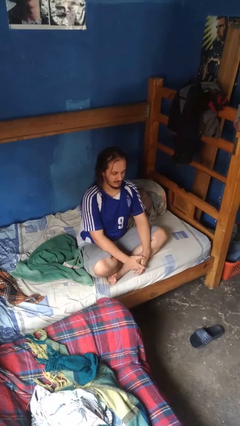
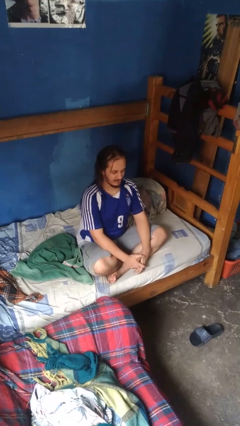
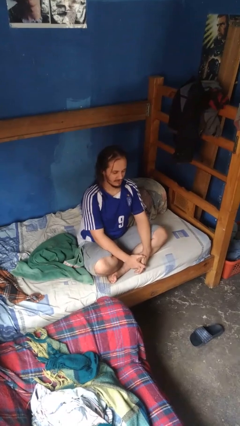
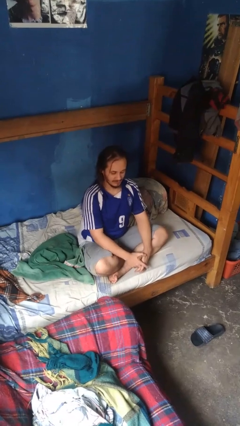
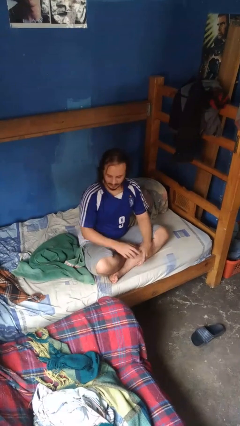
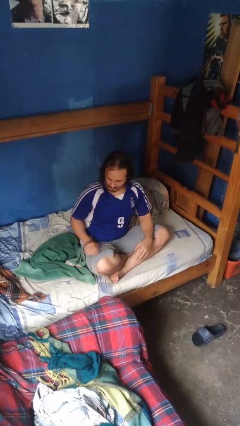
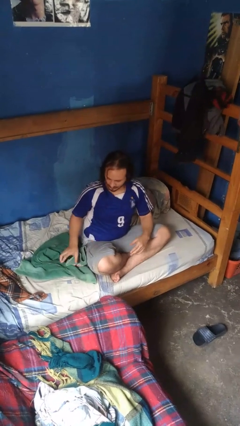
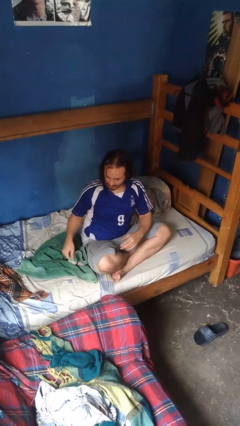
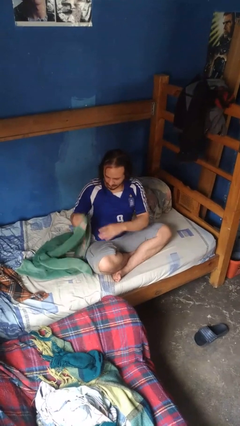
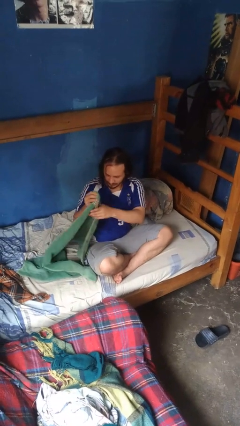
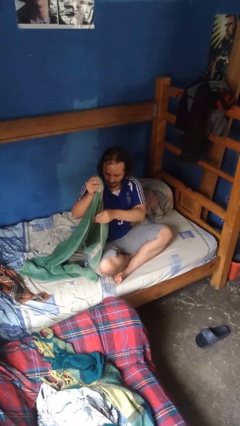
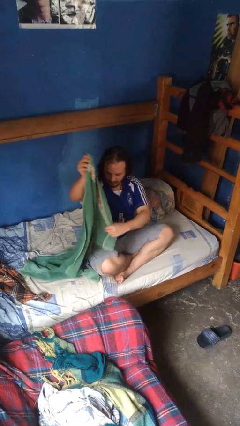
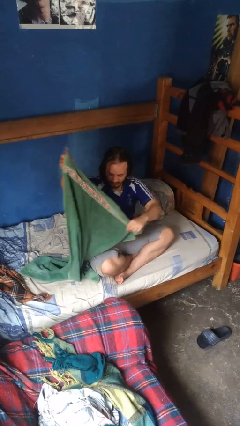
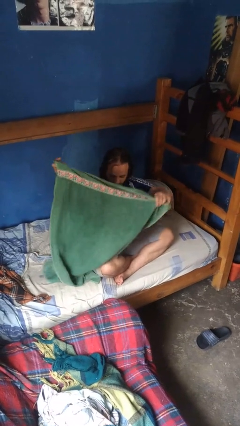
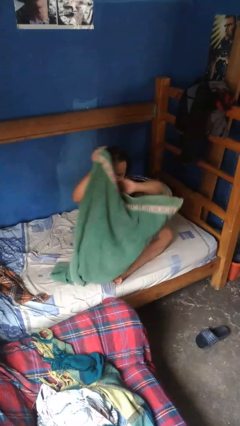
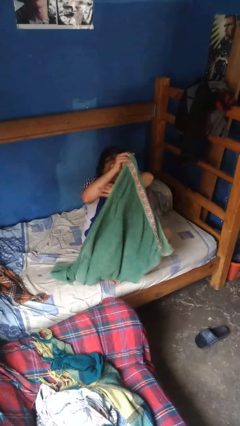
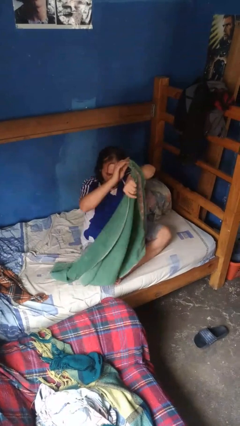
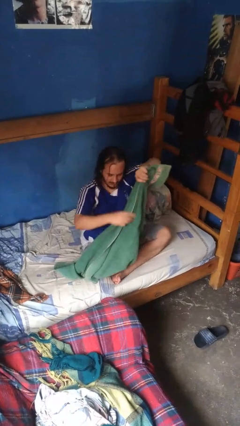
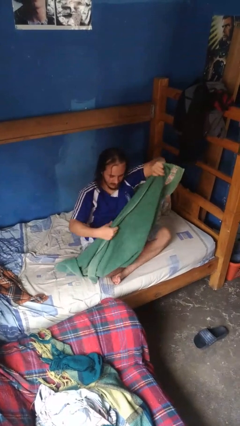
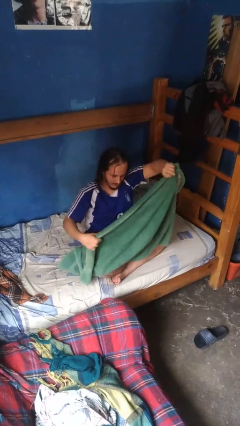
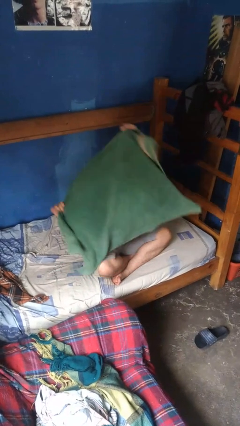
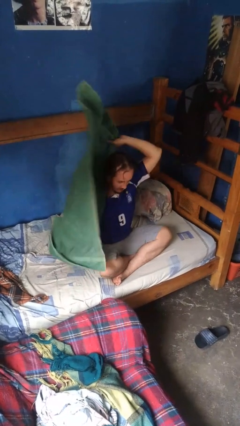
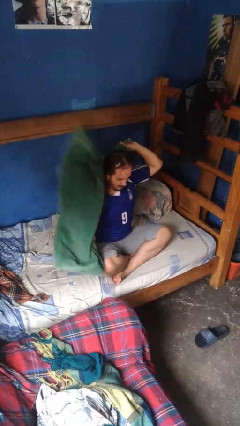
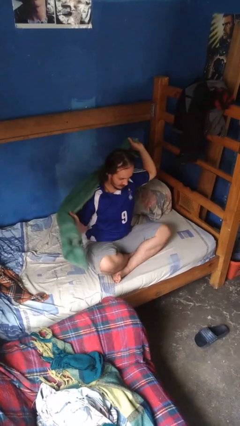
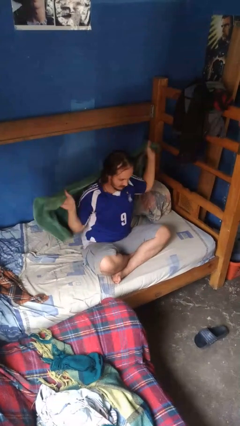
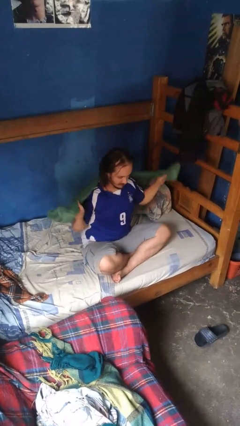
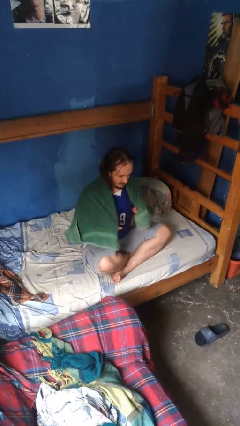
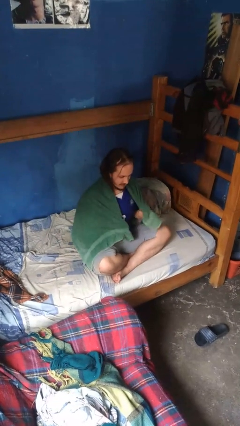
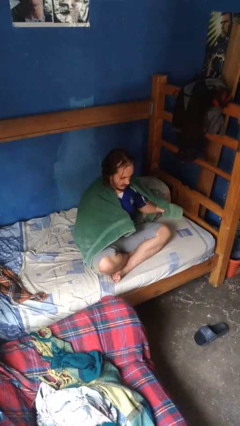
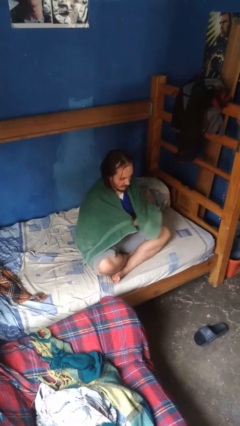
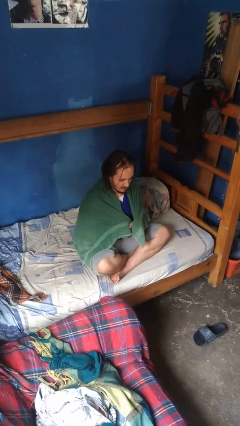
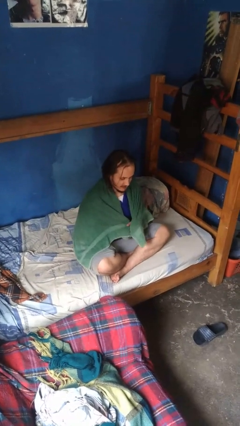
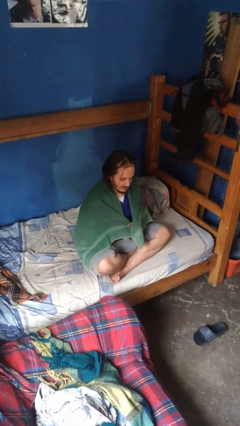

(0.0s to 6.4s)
person covers with blanket

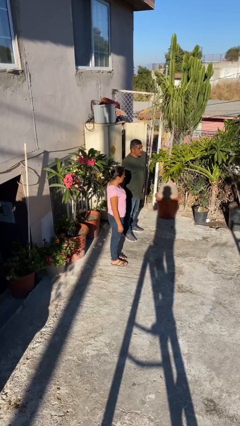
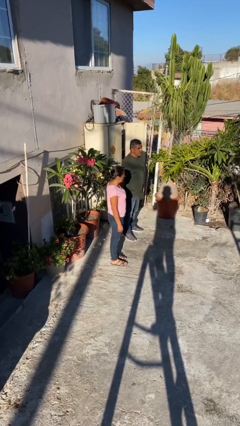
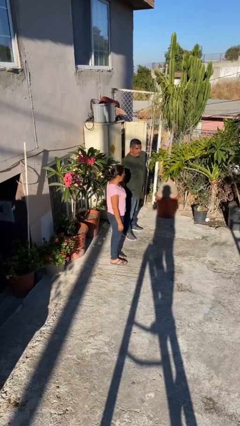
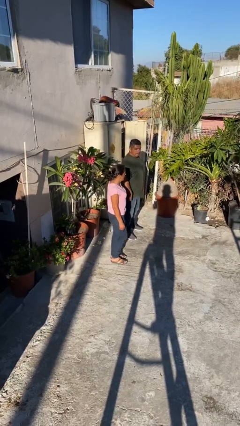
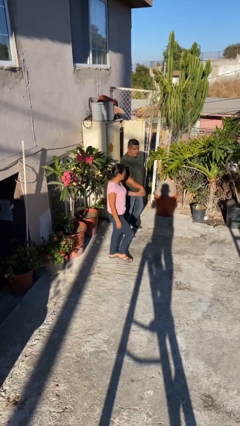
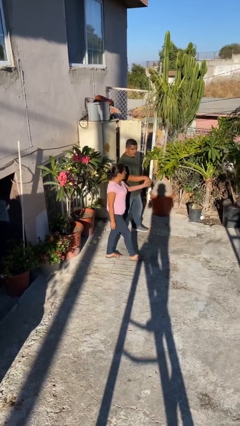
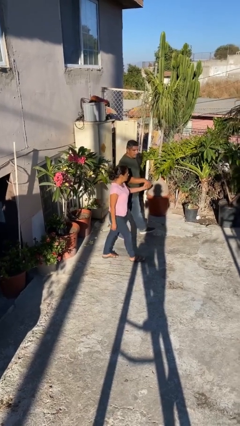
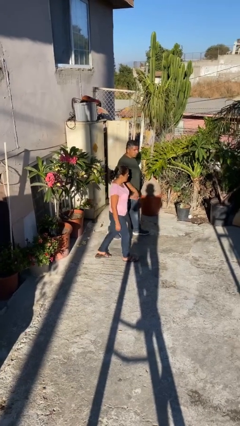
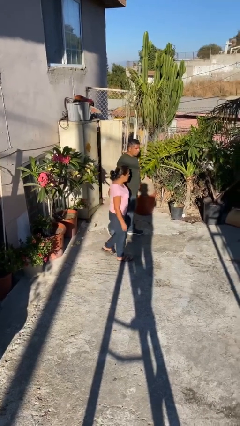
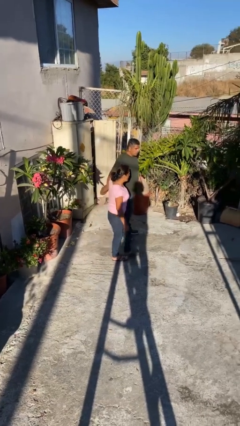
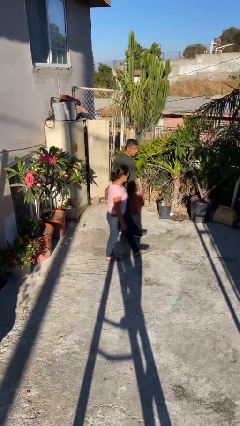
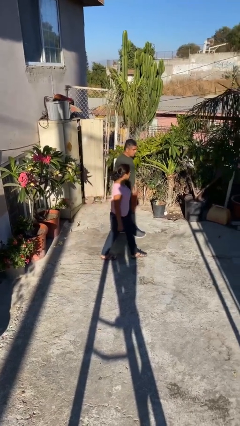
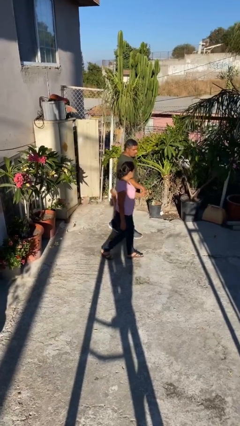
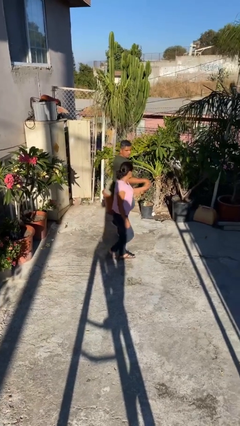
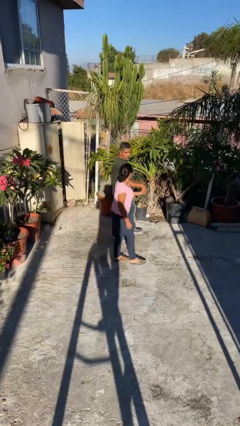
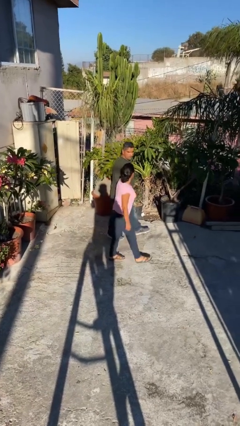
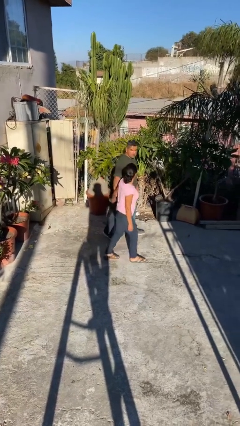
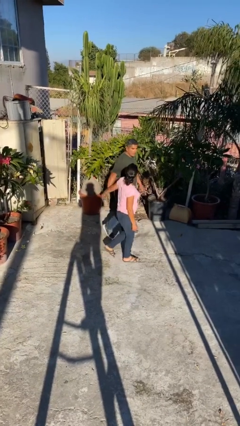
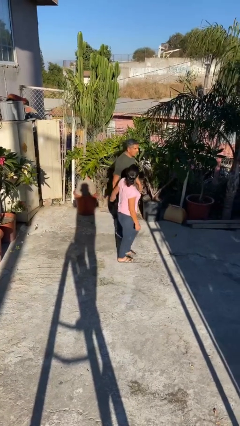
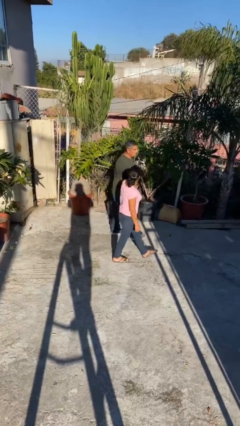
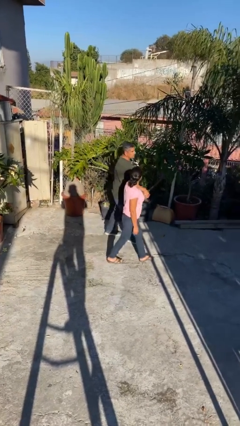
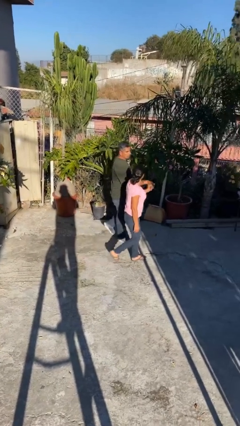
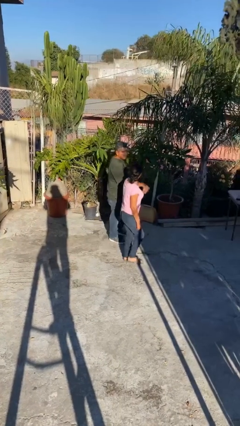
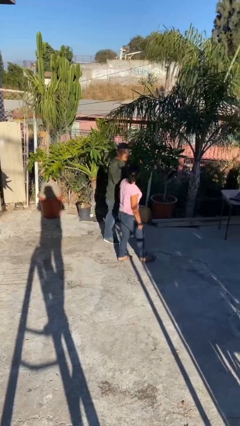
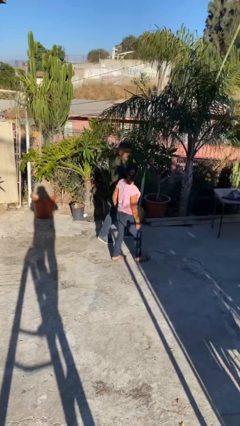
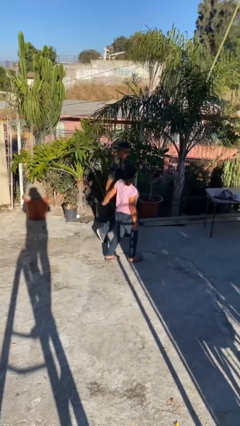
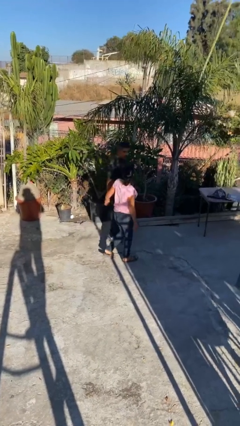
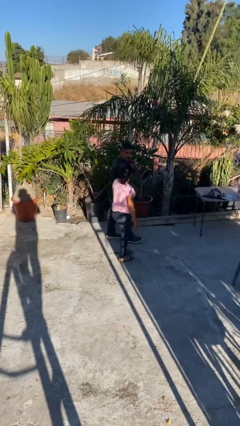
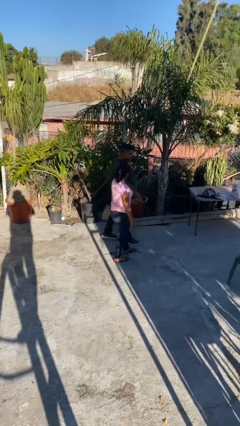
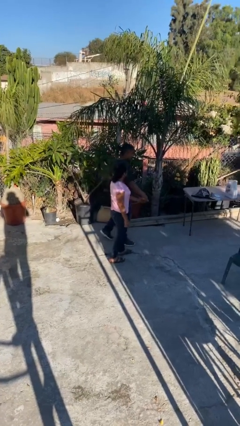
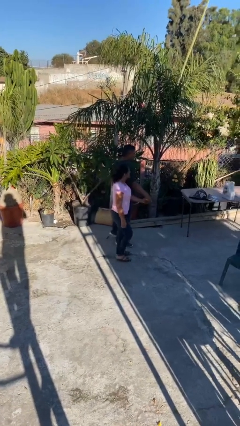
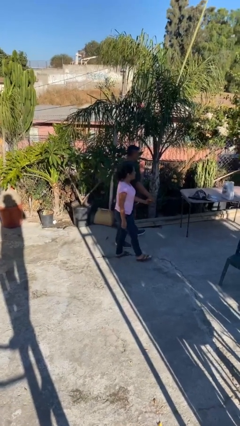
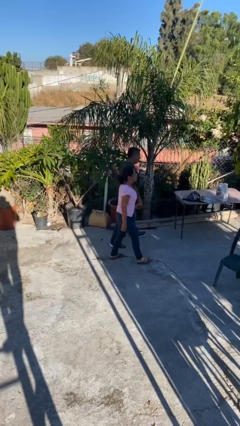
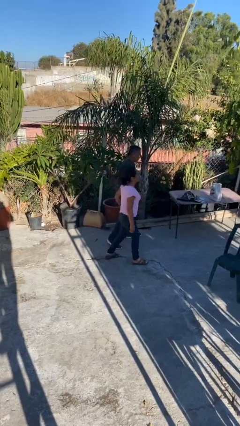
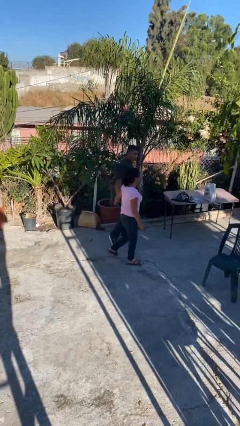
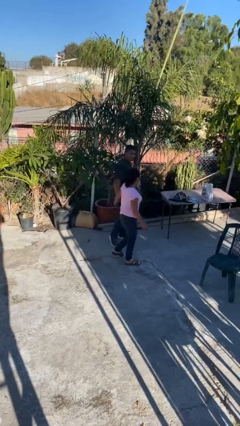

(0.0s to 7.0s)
person holds hand

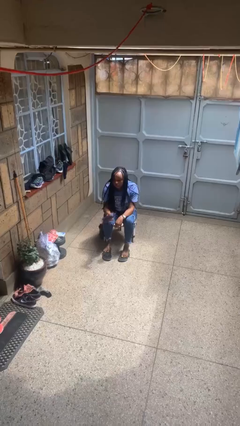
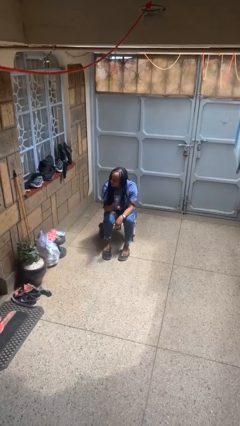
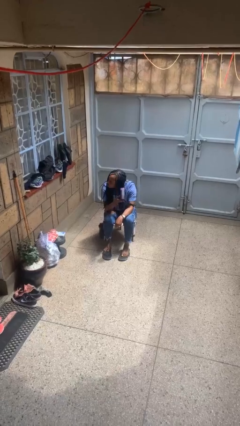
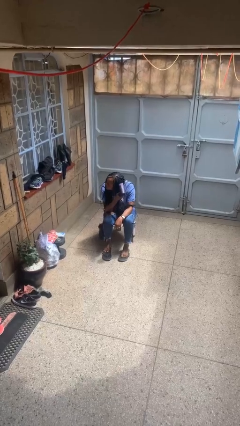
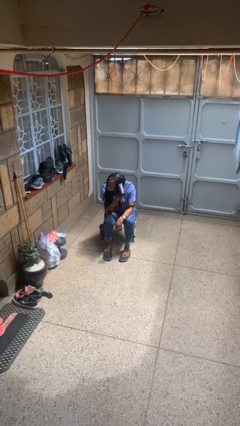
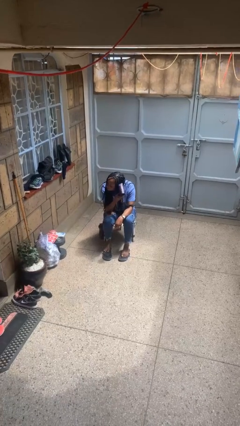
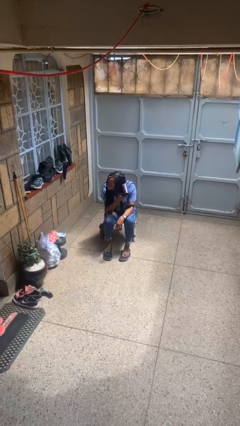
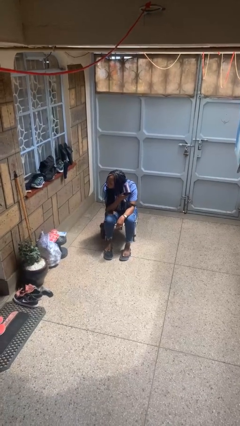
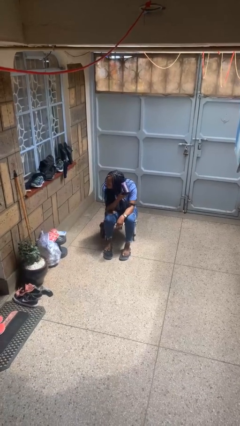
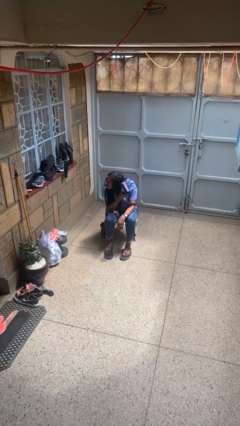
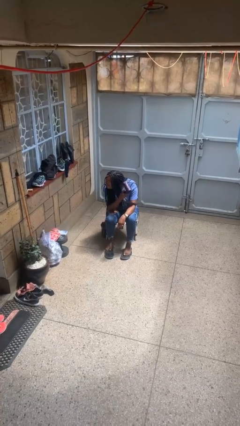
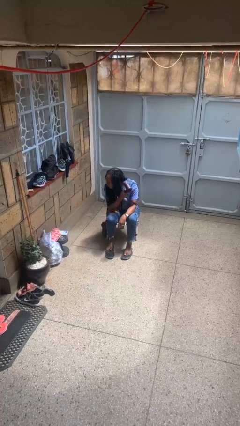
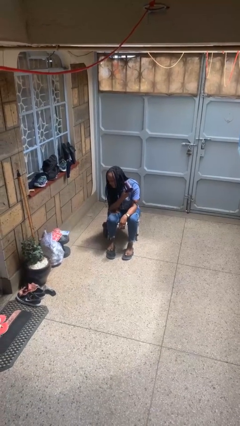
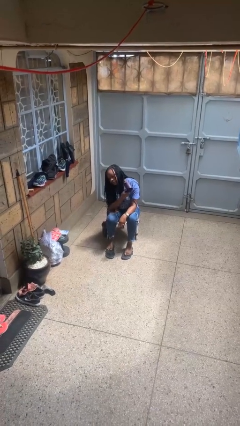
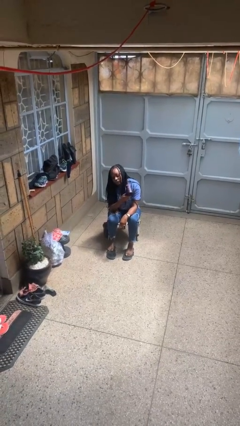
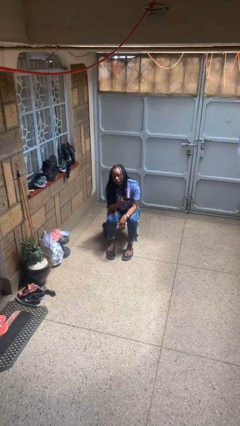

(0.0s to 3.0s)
person dries hair with hairdryer

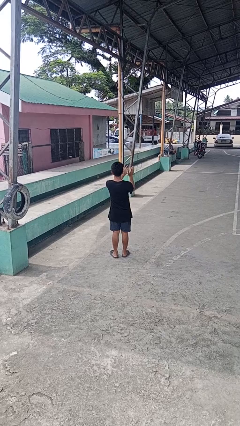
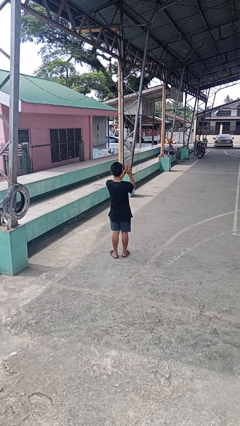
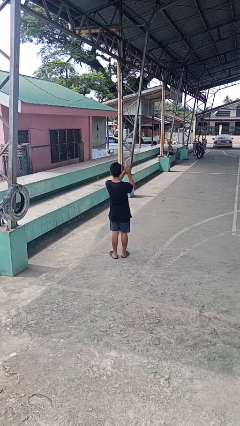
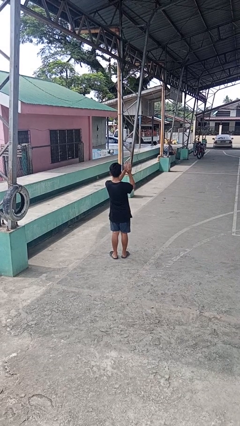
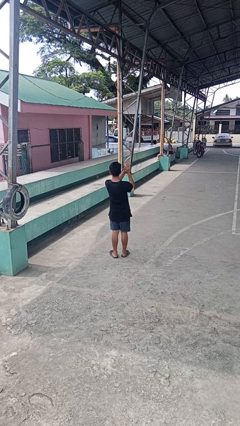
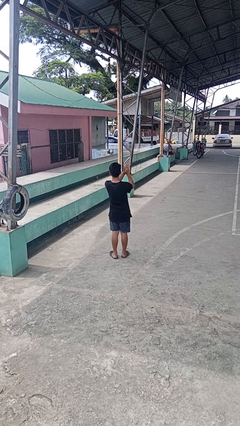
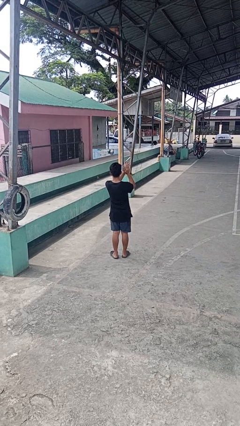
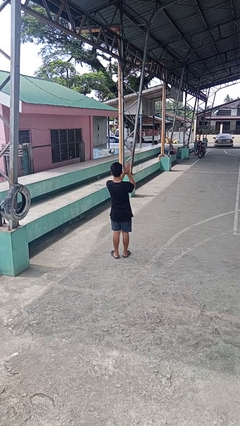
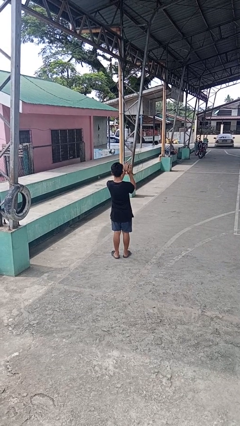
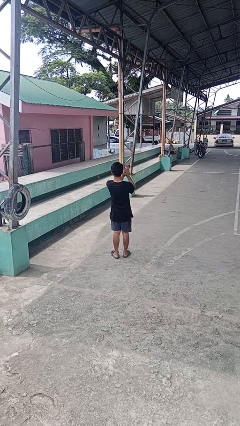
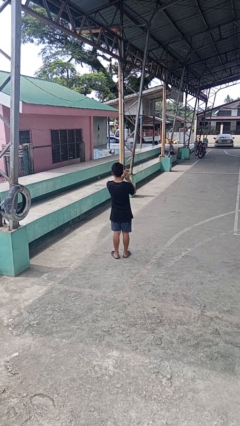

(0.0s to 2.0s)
person claps hands
